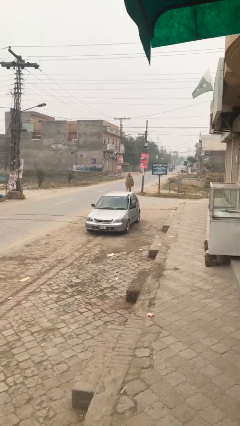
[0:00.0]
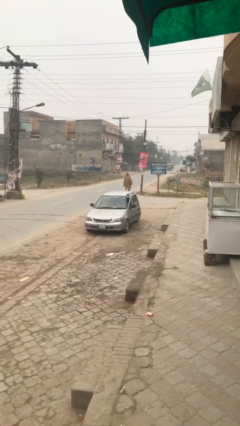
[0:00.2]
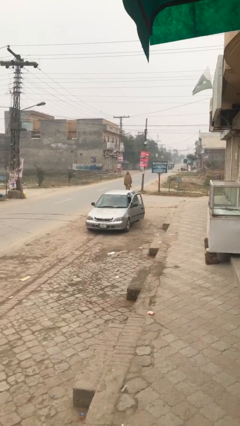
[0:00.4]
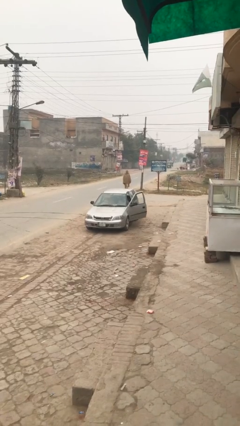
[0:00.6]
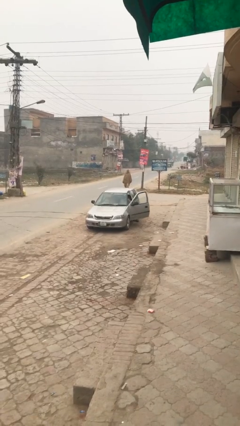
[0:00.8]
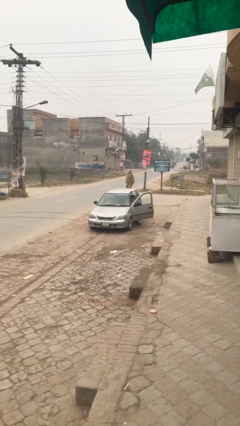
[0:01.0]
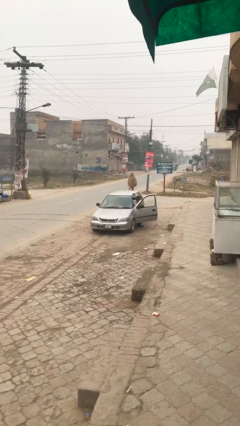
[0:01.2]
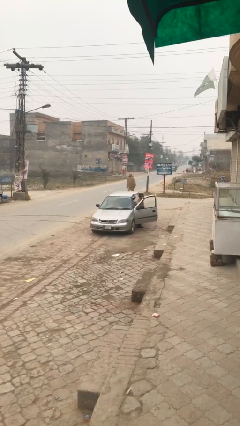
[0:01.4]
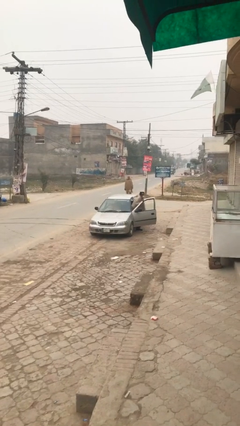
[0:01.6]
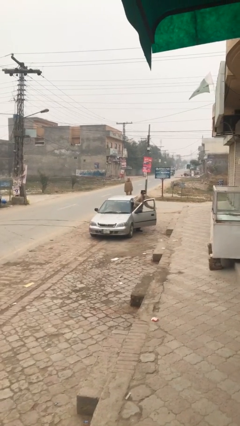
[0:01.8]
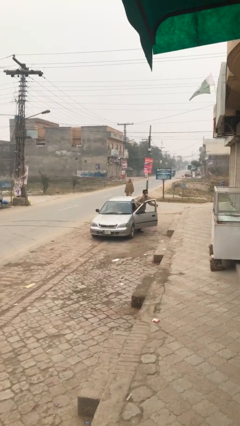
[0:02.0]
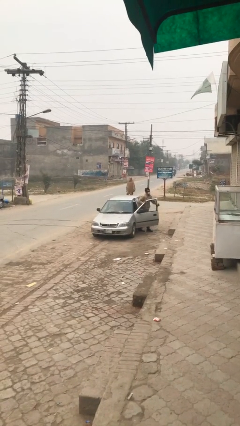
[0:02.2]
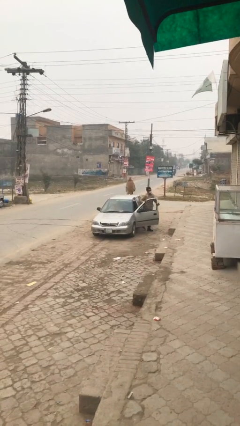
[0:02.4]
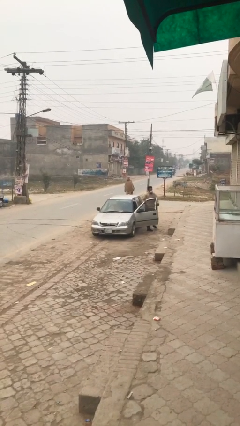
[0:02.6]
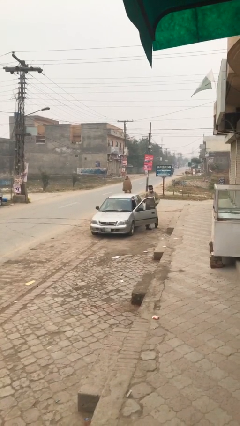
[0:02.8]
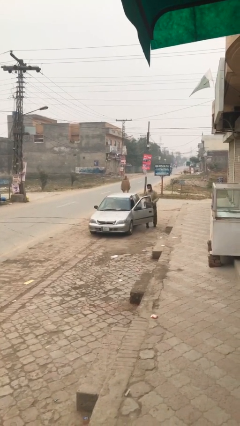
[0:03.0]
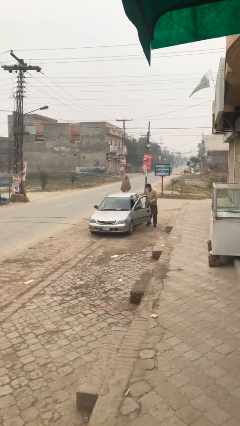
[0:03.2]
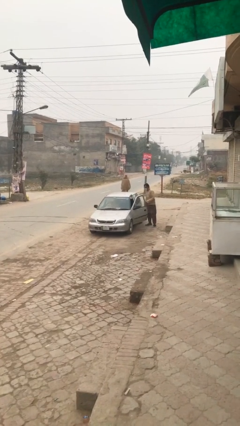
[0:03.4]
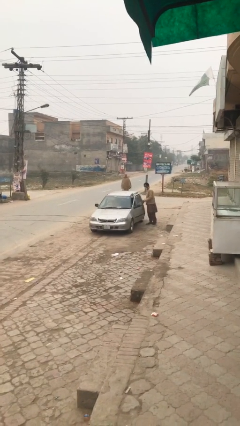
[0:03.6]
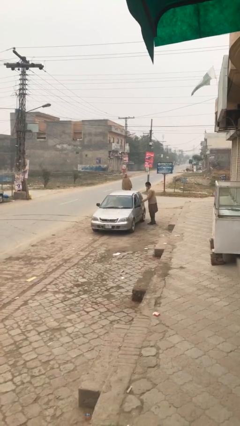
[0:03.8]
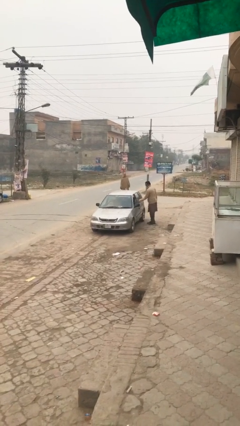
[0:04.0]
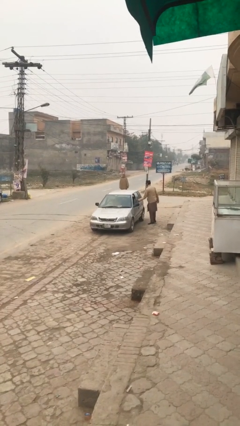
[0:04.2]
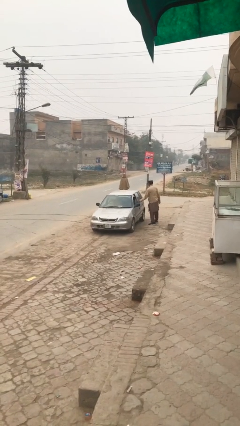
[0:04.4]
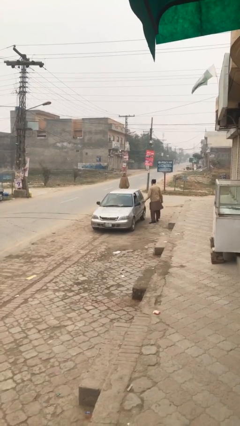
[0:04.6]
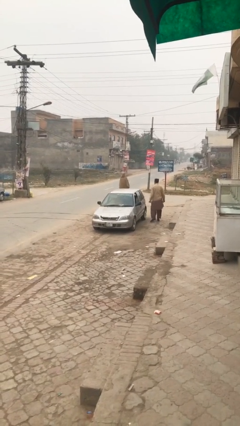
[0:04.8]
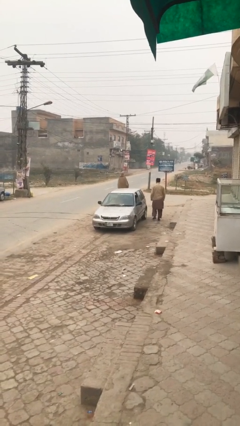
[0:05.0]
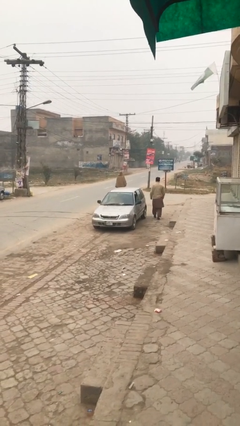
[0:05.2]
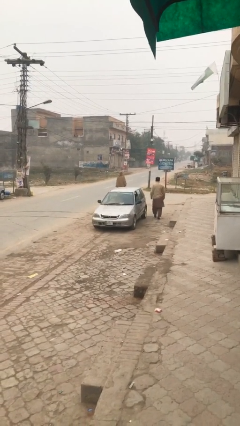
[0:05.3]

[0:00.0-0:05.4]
car drops off person

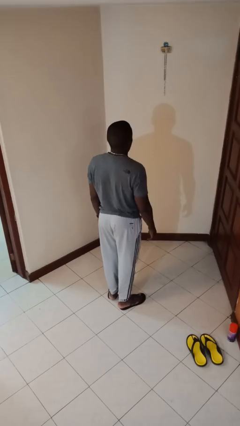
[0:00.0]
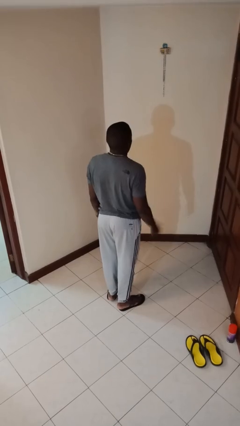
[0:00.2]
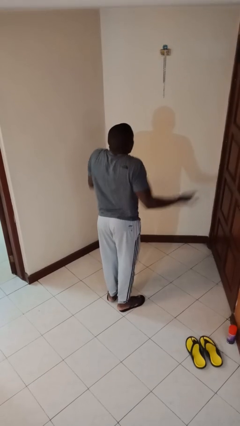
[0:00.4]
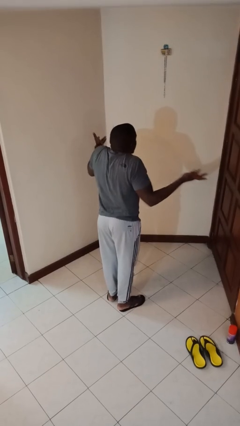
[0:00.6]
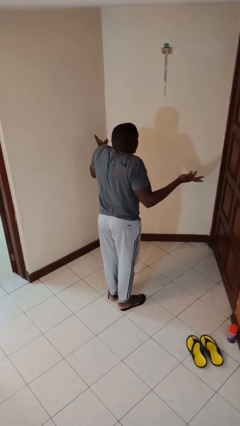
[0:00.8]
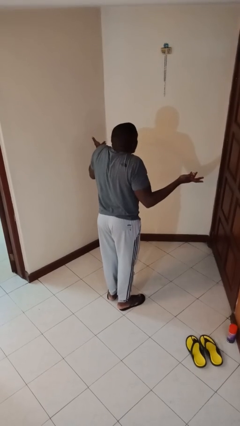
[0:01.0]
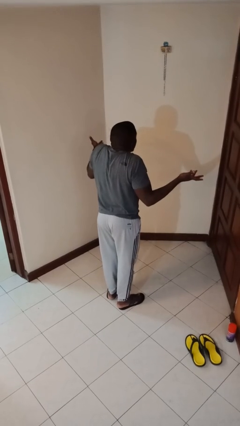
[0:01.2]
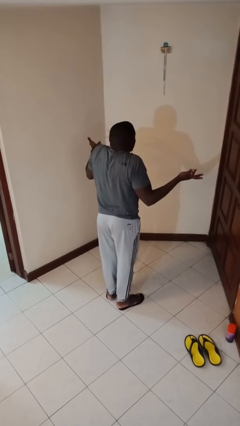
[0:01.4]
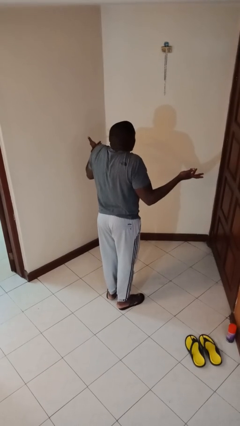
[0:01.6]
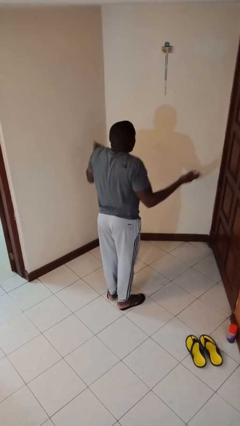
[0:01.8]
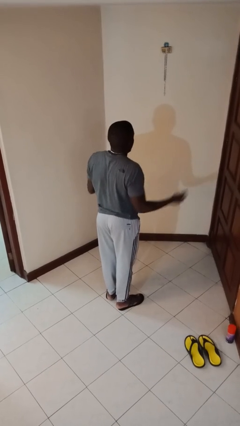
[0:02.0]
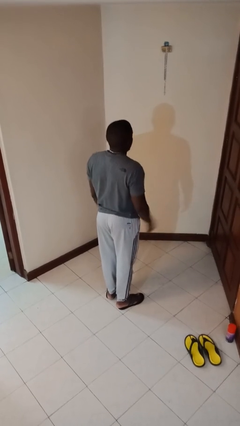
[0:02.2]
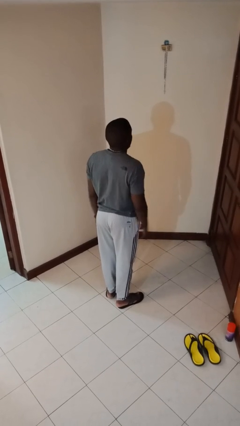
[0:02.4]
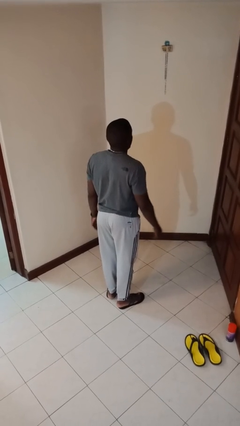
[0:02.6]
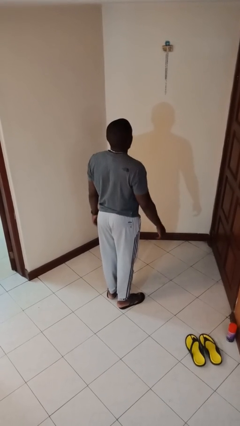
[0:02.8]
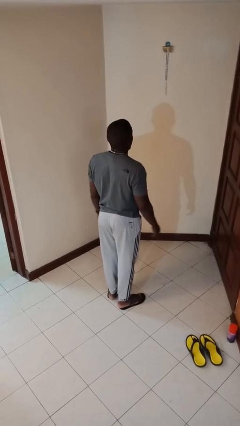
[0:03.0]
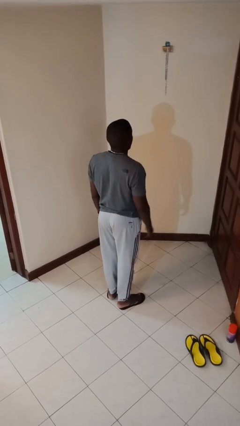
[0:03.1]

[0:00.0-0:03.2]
person shrugs

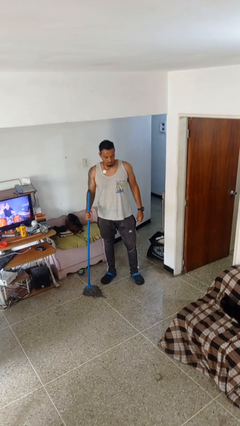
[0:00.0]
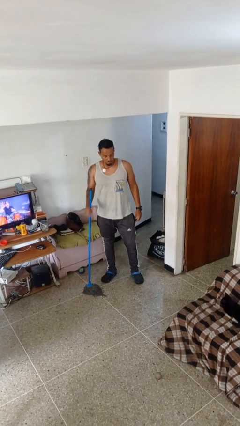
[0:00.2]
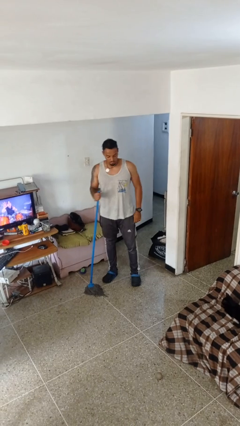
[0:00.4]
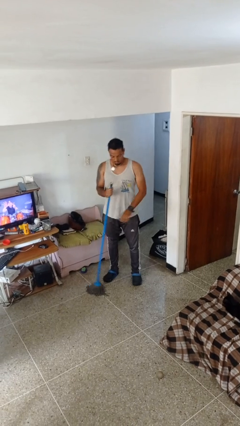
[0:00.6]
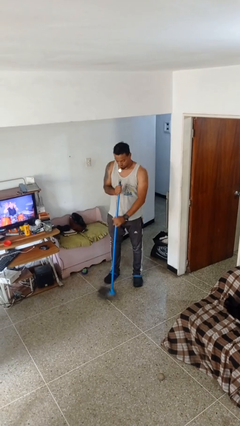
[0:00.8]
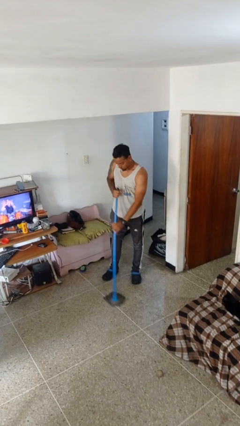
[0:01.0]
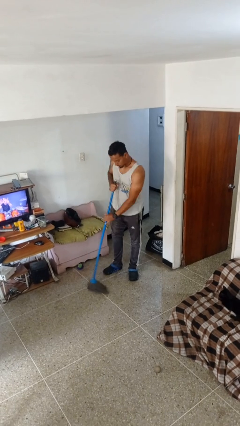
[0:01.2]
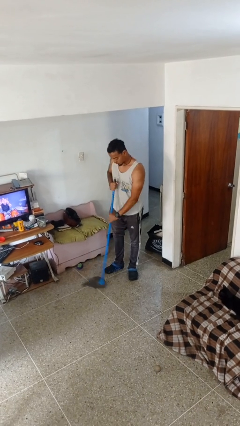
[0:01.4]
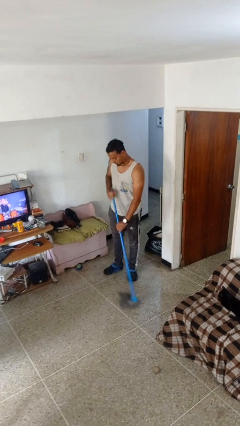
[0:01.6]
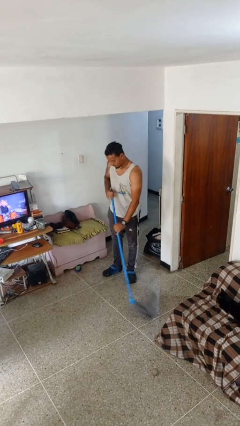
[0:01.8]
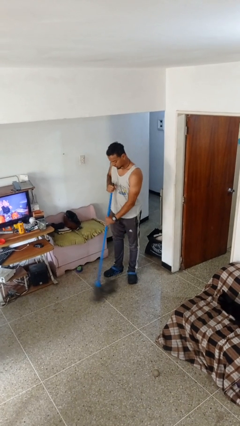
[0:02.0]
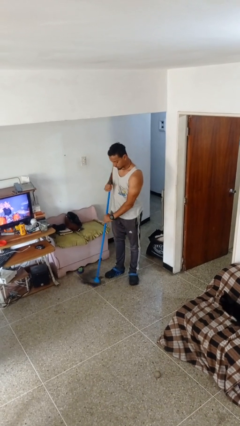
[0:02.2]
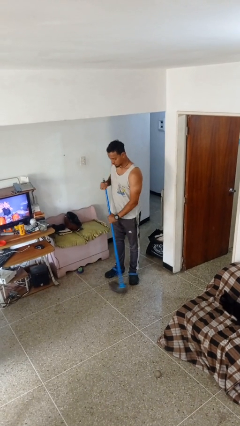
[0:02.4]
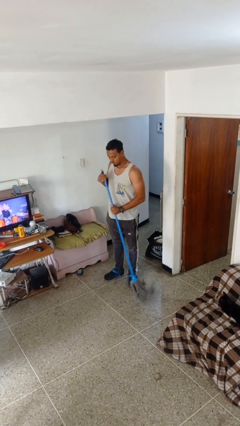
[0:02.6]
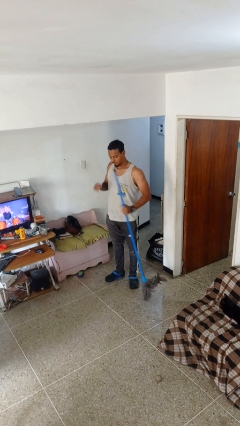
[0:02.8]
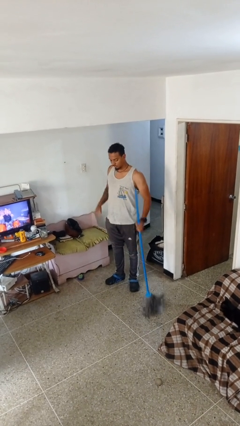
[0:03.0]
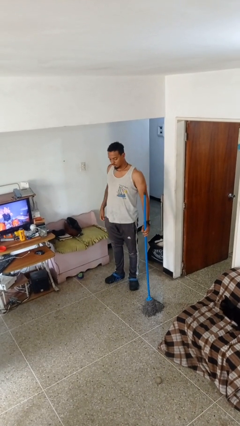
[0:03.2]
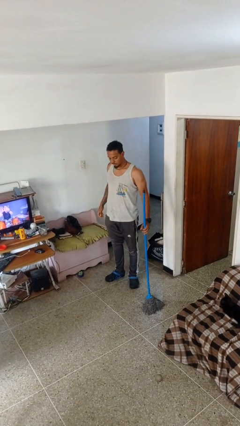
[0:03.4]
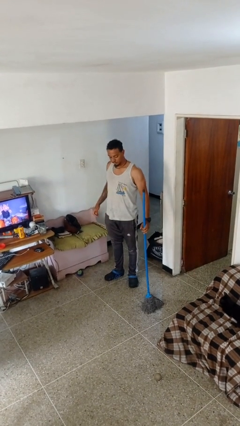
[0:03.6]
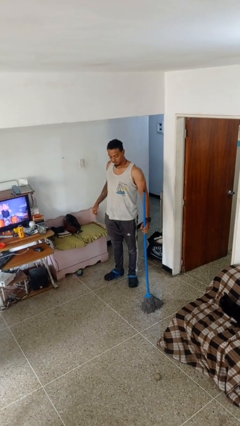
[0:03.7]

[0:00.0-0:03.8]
person mops

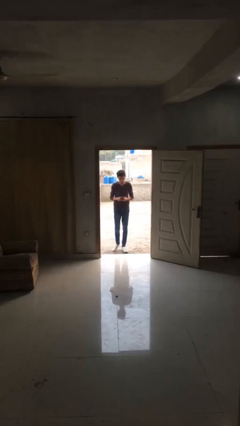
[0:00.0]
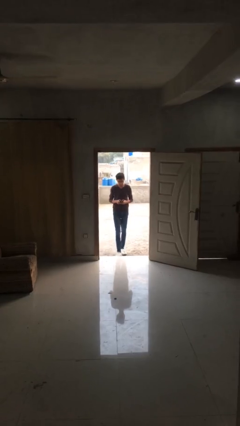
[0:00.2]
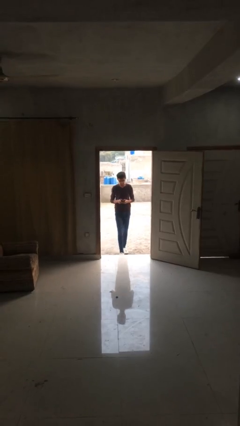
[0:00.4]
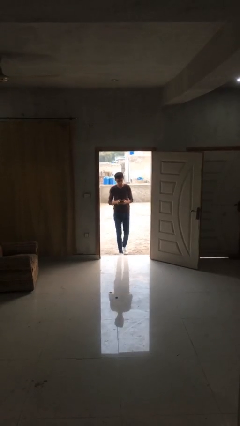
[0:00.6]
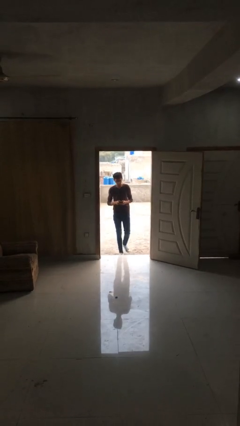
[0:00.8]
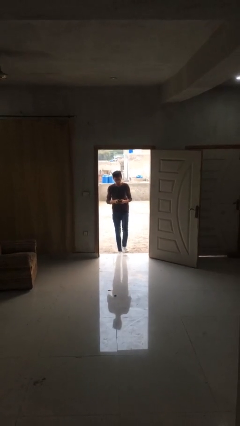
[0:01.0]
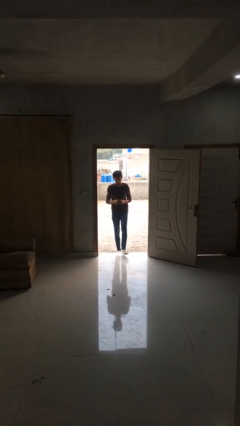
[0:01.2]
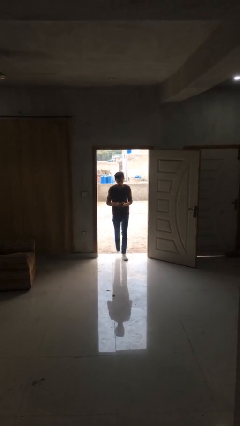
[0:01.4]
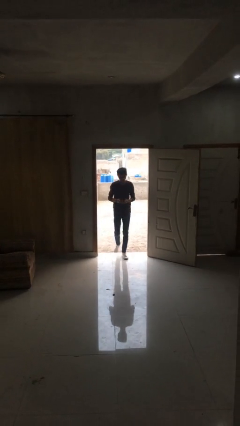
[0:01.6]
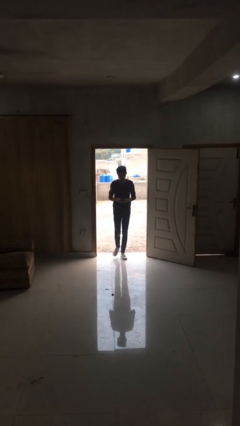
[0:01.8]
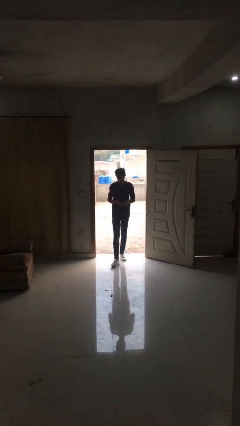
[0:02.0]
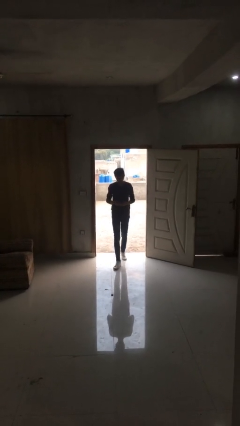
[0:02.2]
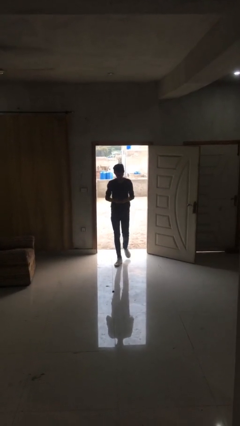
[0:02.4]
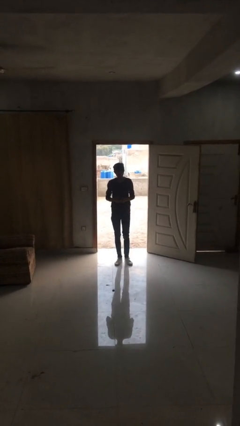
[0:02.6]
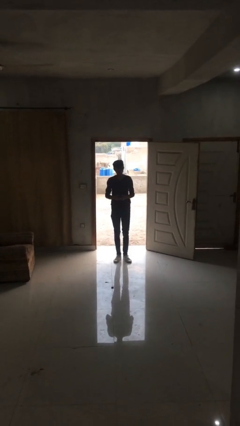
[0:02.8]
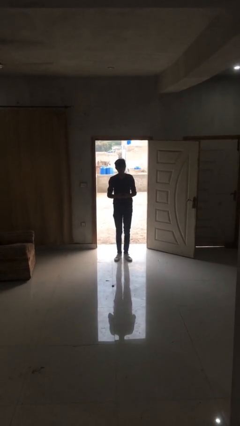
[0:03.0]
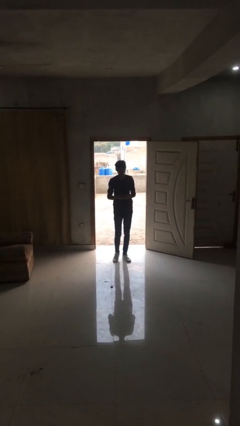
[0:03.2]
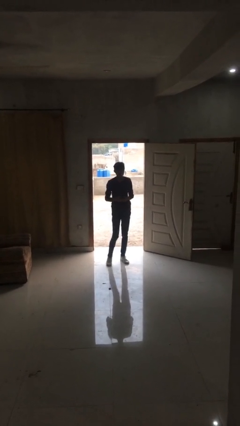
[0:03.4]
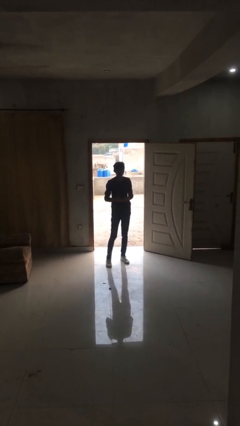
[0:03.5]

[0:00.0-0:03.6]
person enters scene through structure

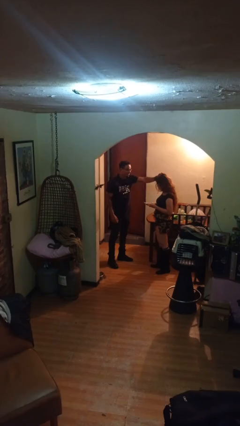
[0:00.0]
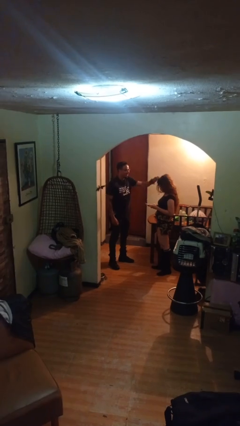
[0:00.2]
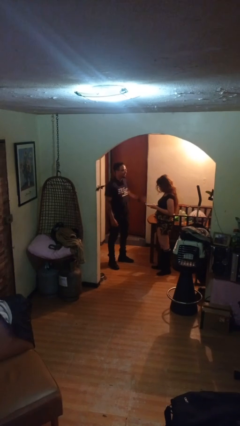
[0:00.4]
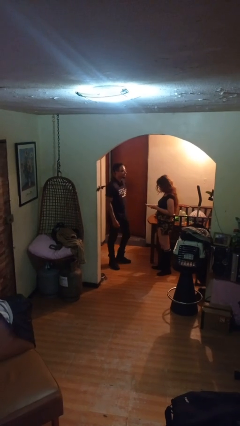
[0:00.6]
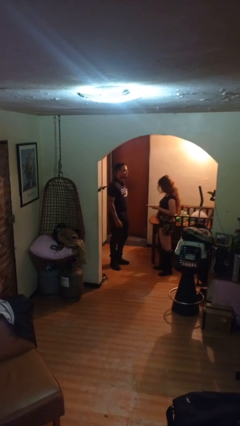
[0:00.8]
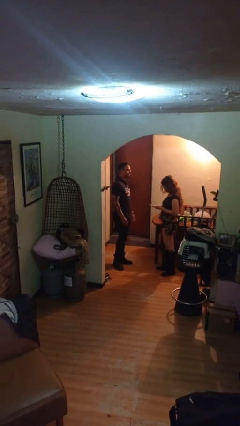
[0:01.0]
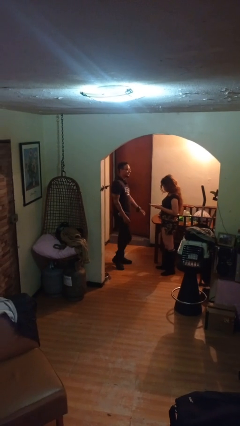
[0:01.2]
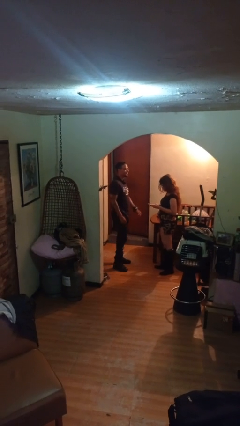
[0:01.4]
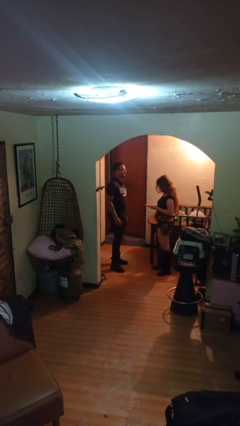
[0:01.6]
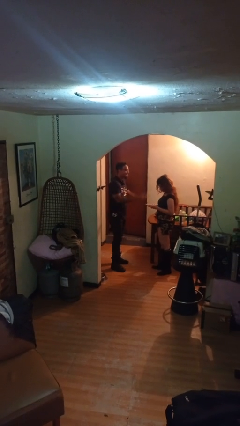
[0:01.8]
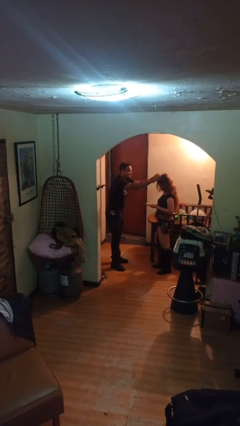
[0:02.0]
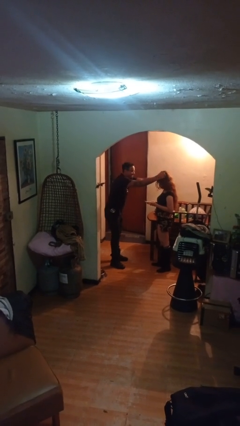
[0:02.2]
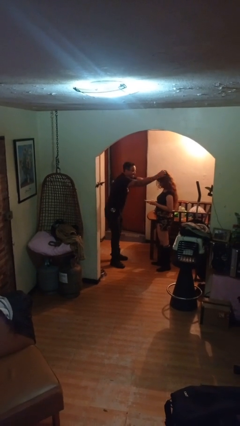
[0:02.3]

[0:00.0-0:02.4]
person drinks from shotglass
